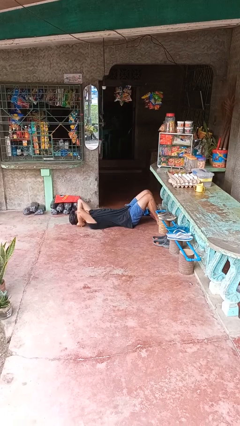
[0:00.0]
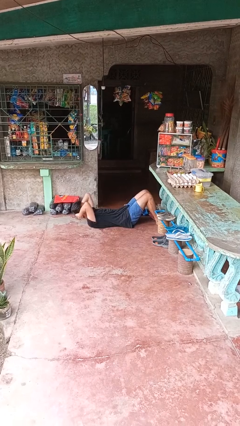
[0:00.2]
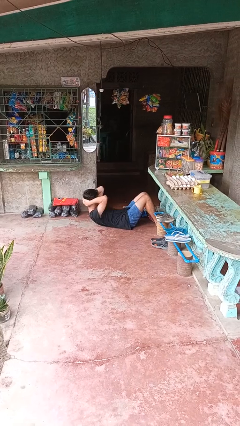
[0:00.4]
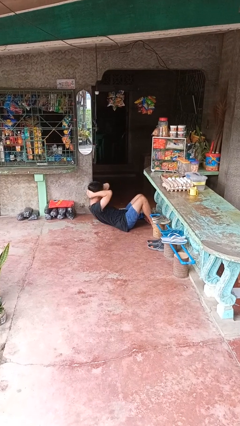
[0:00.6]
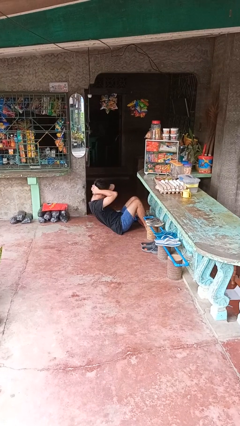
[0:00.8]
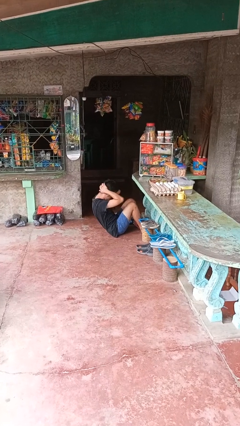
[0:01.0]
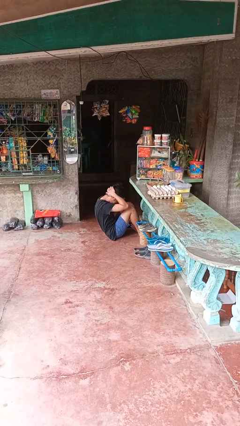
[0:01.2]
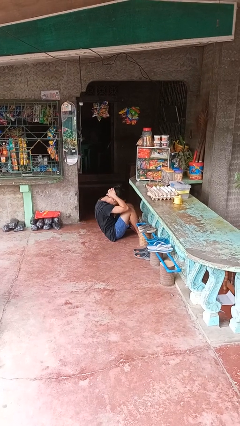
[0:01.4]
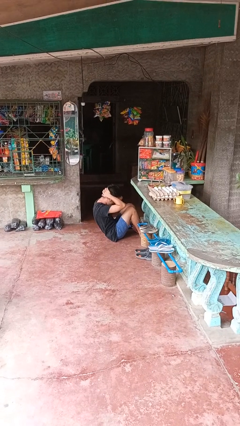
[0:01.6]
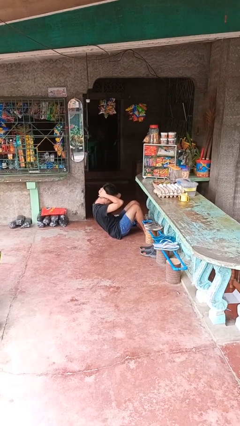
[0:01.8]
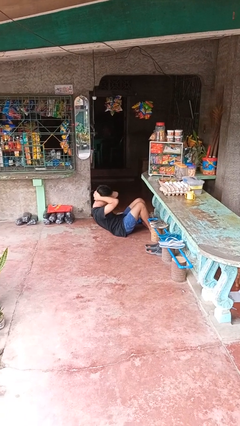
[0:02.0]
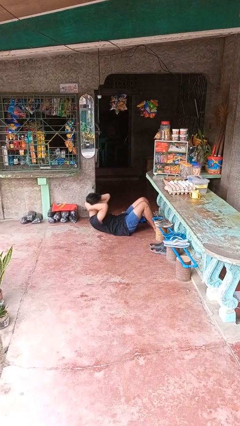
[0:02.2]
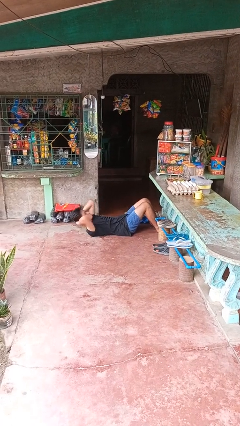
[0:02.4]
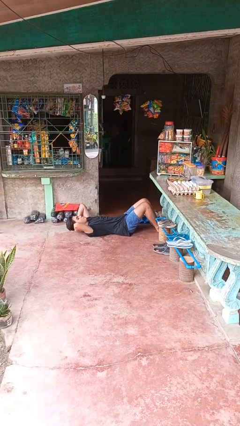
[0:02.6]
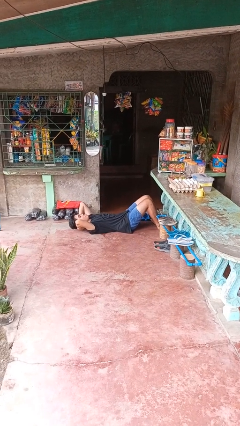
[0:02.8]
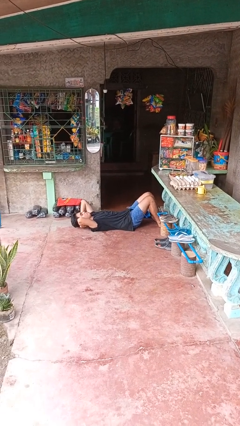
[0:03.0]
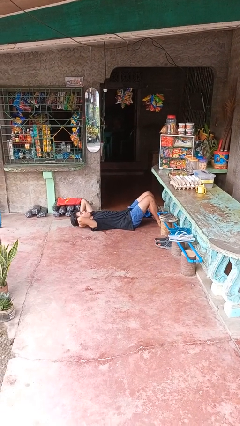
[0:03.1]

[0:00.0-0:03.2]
person exercises with situp

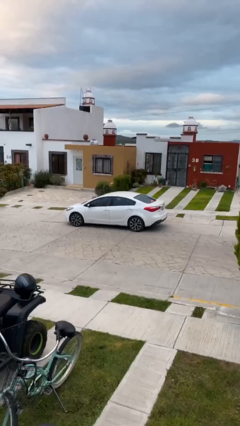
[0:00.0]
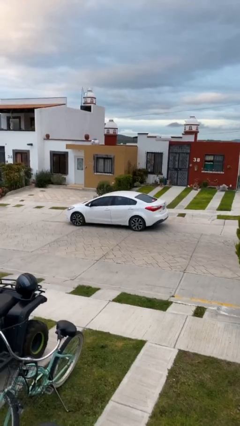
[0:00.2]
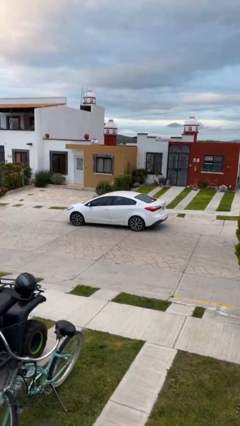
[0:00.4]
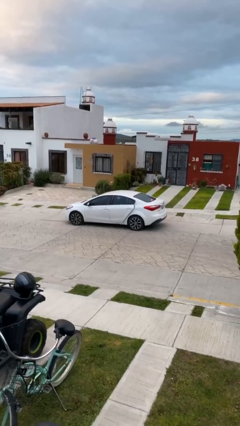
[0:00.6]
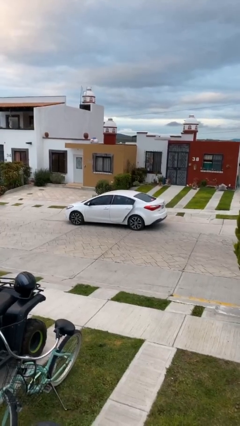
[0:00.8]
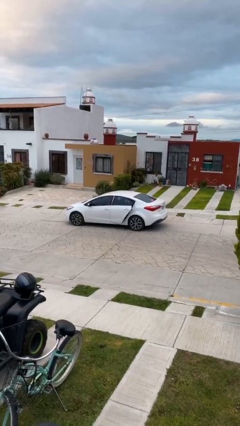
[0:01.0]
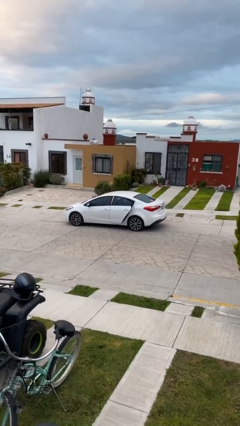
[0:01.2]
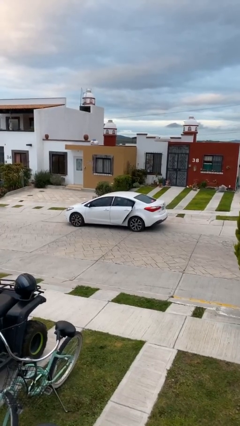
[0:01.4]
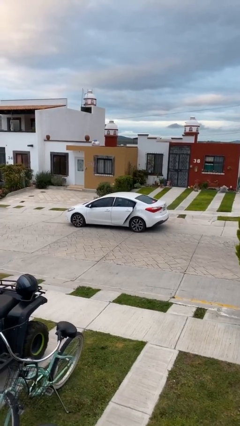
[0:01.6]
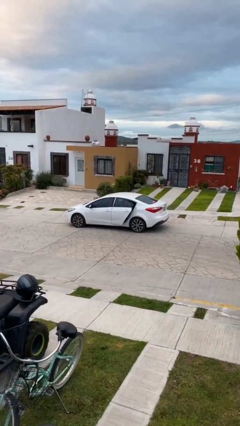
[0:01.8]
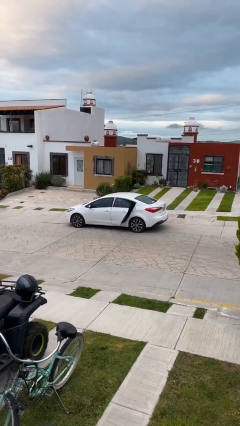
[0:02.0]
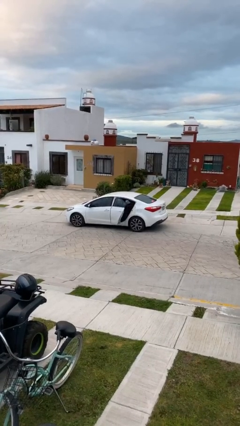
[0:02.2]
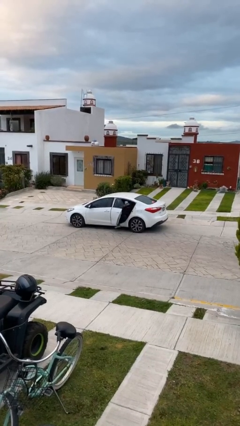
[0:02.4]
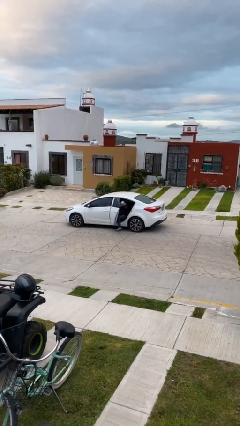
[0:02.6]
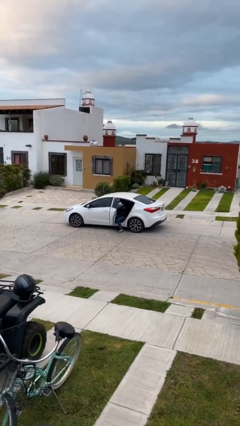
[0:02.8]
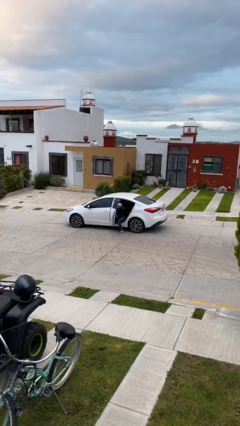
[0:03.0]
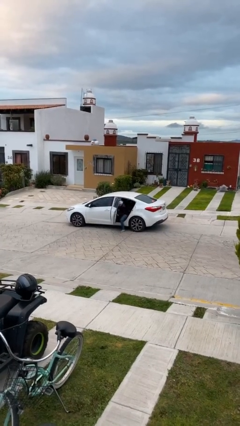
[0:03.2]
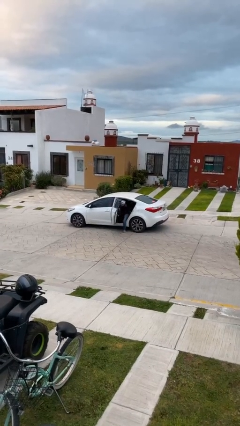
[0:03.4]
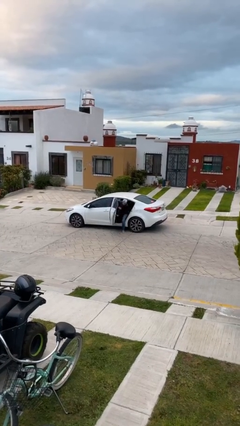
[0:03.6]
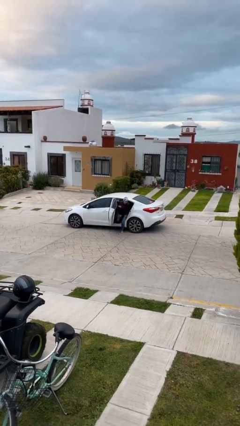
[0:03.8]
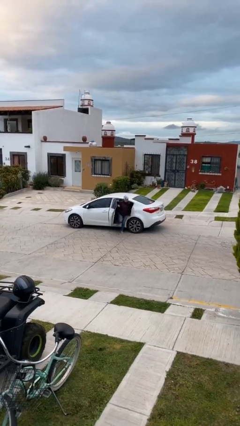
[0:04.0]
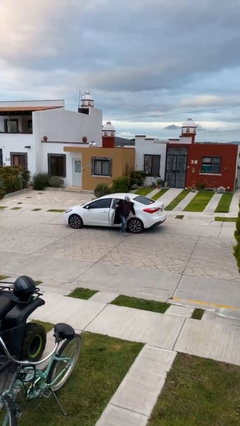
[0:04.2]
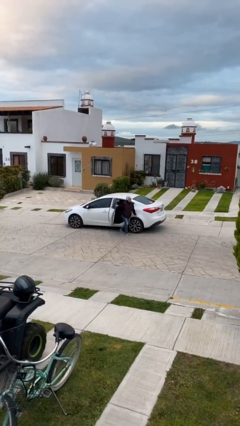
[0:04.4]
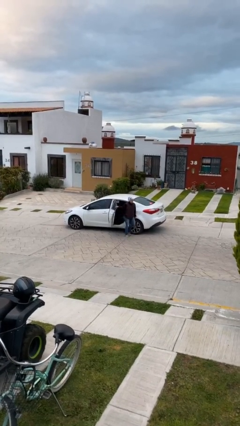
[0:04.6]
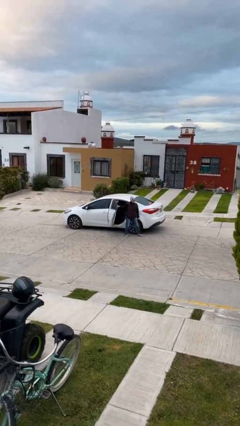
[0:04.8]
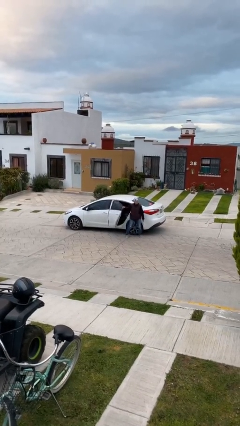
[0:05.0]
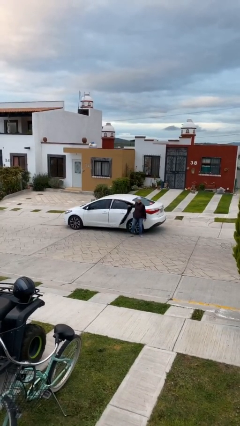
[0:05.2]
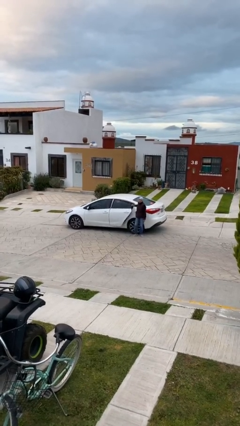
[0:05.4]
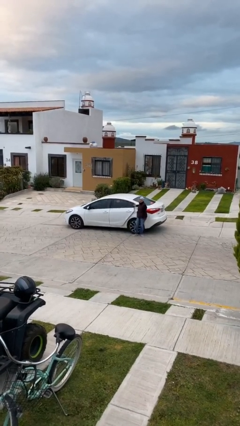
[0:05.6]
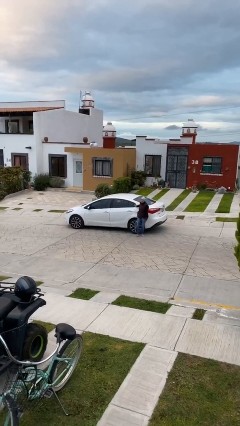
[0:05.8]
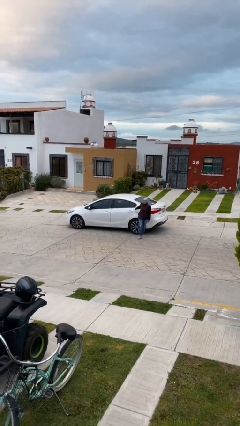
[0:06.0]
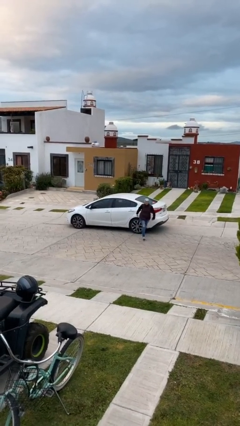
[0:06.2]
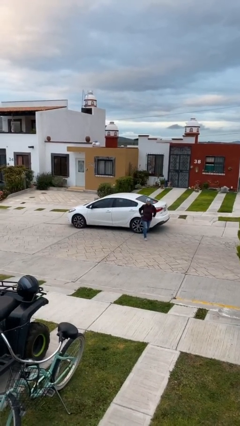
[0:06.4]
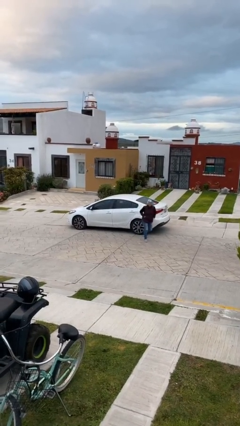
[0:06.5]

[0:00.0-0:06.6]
car drops off person

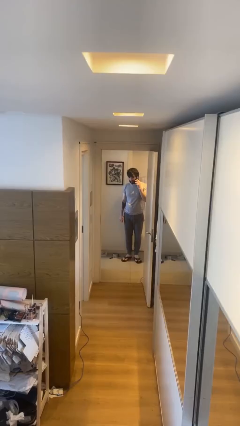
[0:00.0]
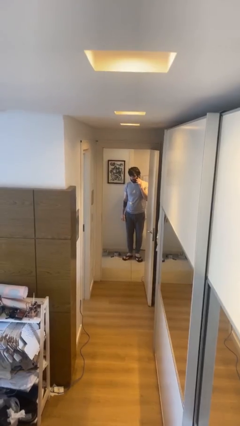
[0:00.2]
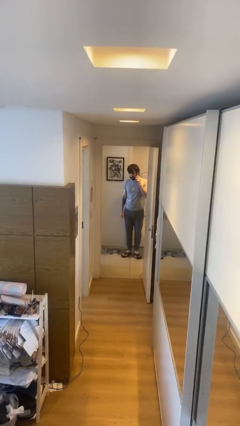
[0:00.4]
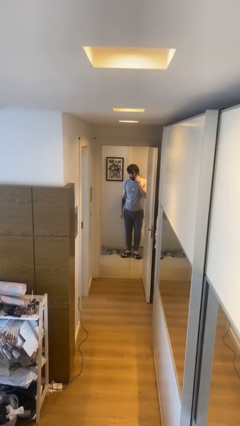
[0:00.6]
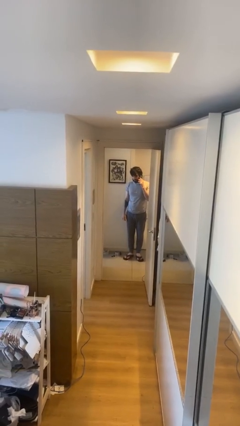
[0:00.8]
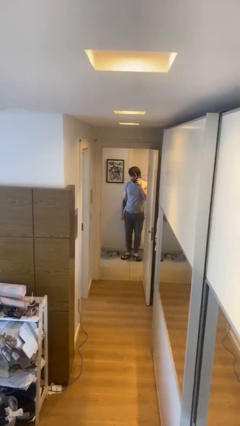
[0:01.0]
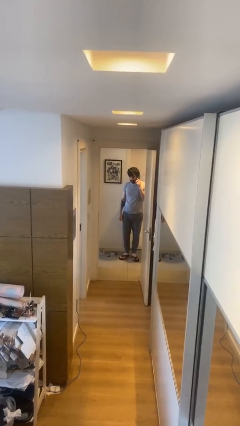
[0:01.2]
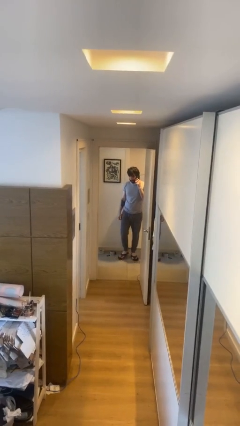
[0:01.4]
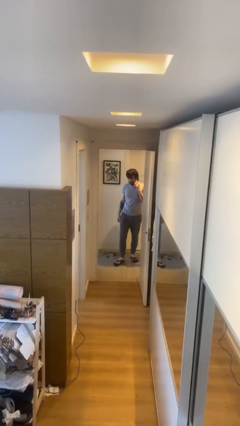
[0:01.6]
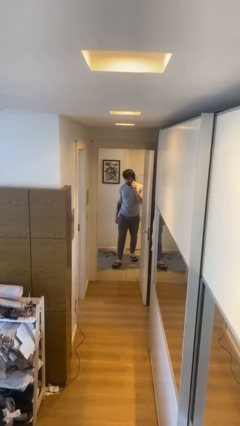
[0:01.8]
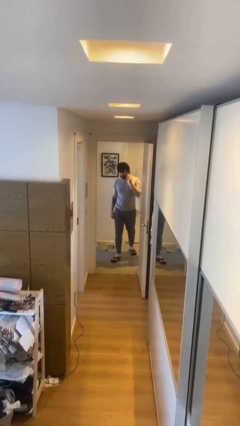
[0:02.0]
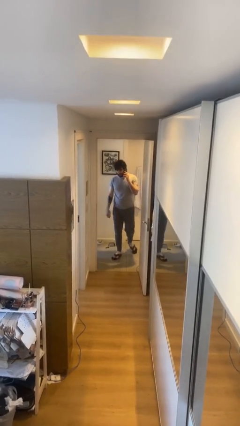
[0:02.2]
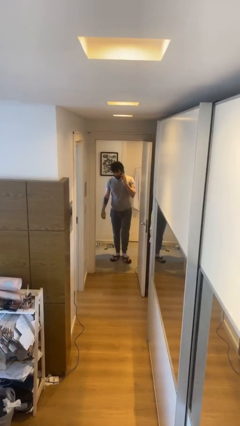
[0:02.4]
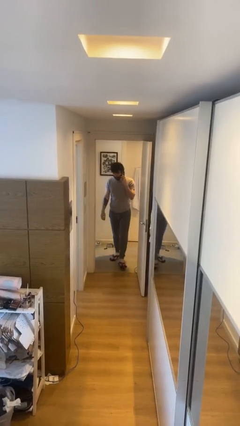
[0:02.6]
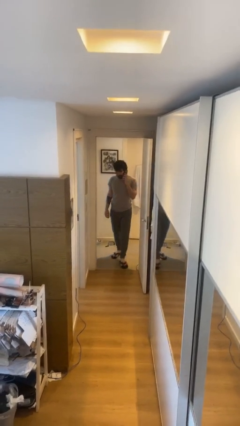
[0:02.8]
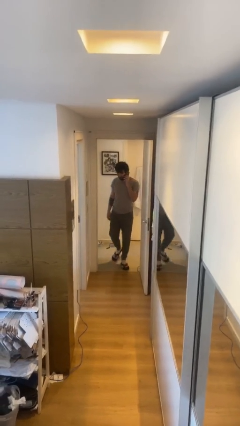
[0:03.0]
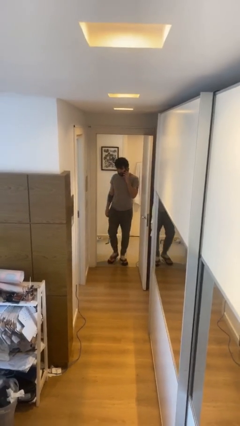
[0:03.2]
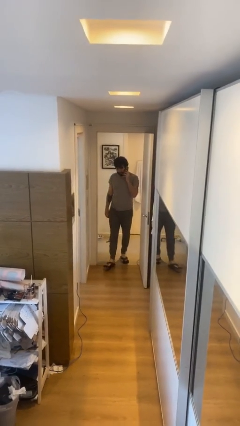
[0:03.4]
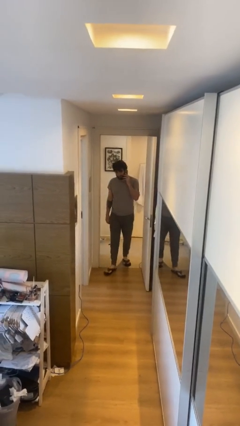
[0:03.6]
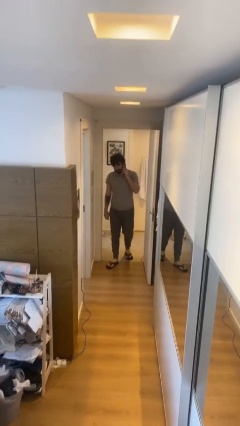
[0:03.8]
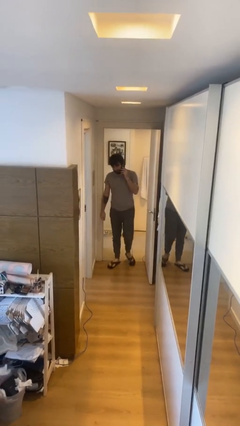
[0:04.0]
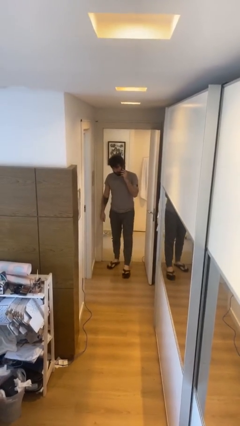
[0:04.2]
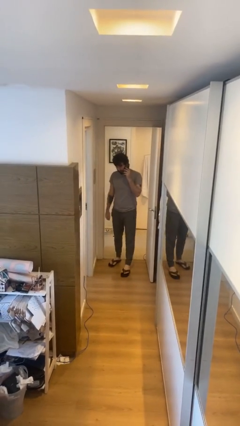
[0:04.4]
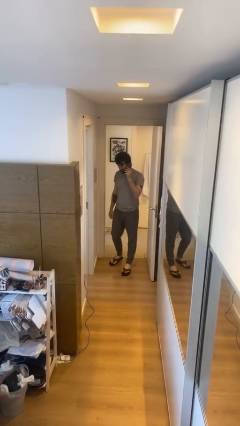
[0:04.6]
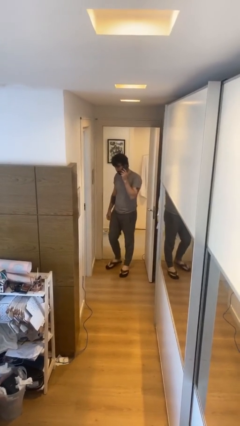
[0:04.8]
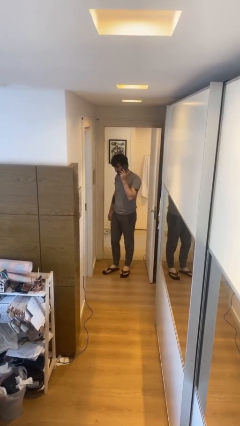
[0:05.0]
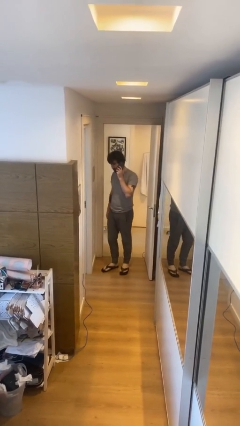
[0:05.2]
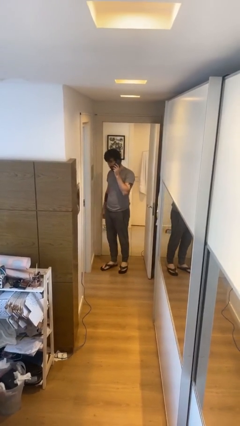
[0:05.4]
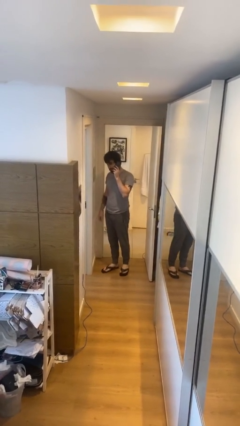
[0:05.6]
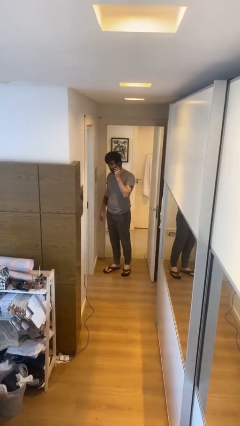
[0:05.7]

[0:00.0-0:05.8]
person enters scene through structure

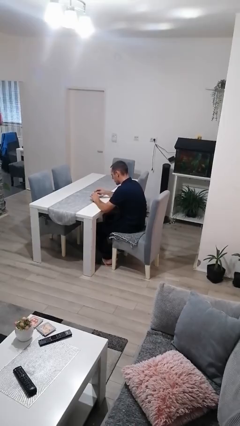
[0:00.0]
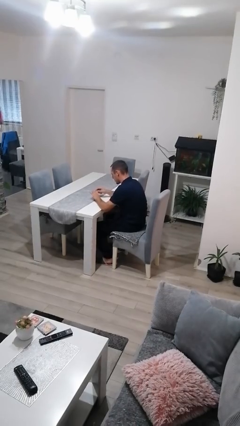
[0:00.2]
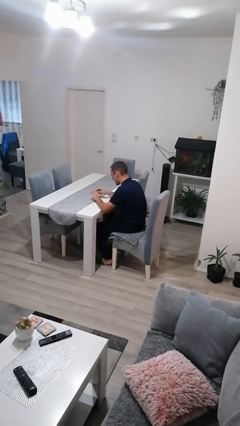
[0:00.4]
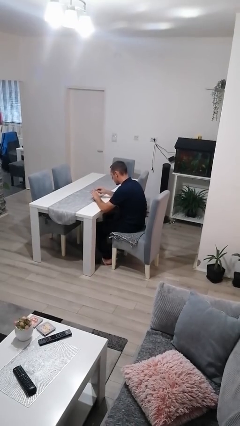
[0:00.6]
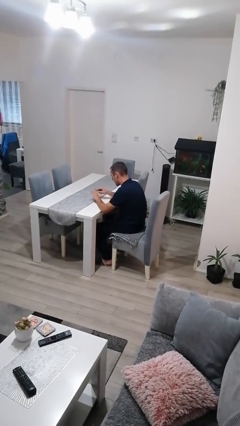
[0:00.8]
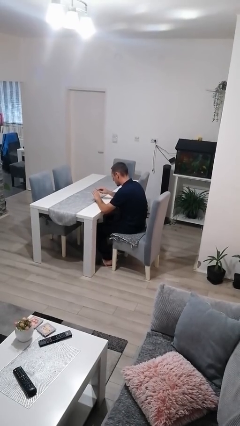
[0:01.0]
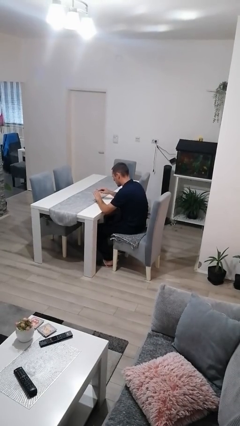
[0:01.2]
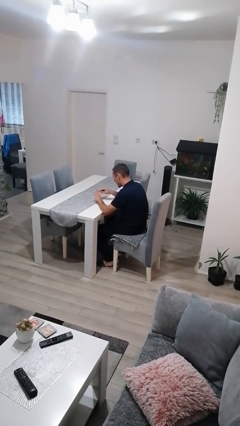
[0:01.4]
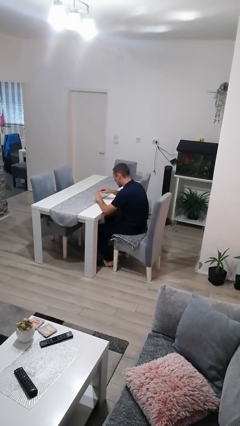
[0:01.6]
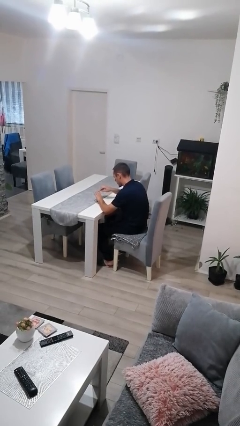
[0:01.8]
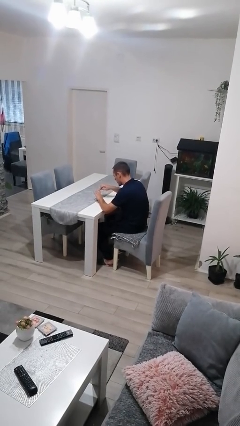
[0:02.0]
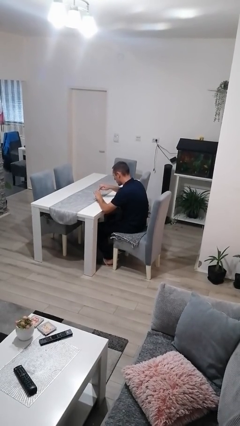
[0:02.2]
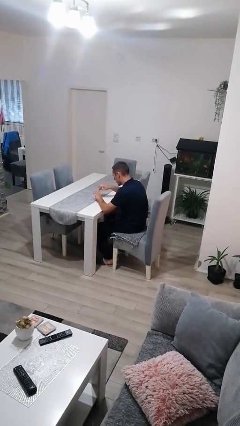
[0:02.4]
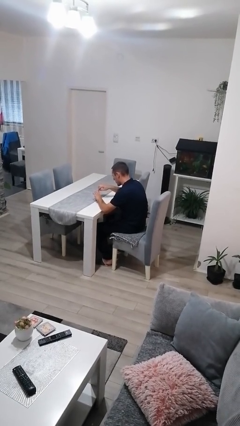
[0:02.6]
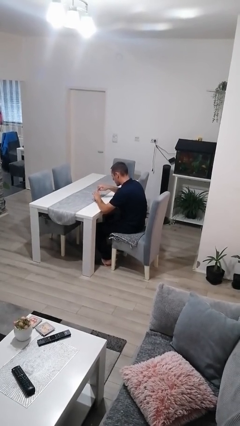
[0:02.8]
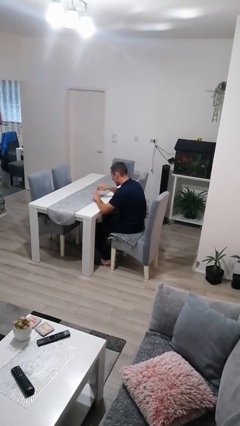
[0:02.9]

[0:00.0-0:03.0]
person files fingernails
